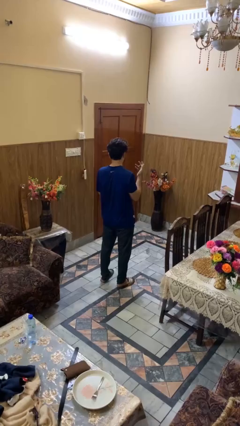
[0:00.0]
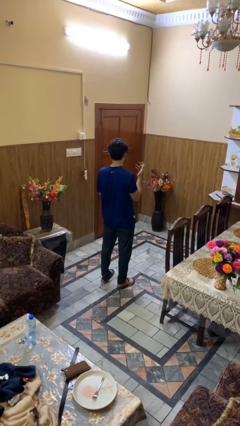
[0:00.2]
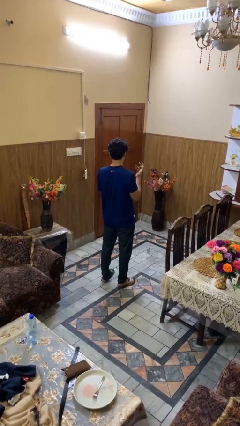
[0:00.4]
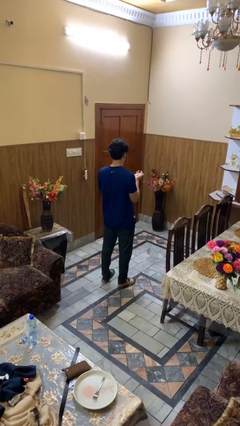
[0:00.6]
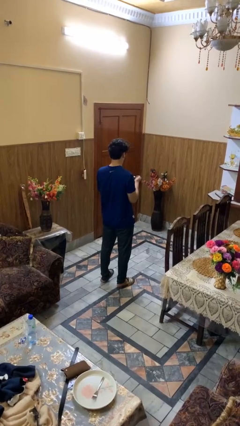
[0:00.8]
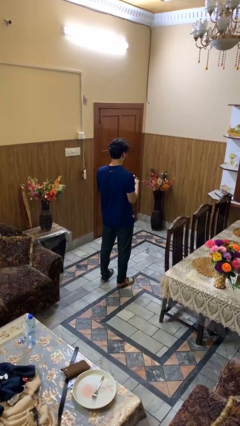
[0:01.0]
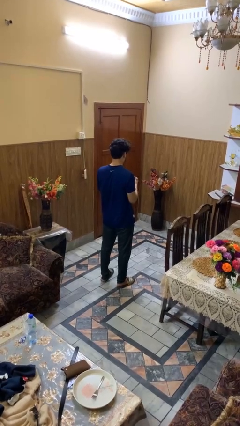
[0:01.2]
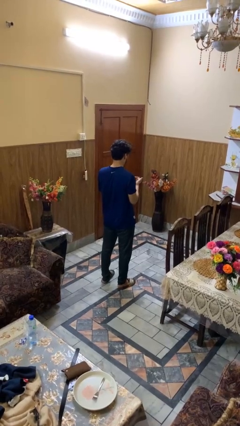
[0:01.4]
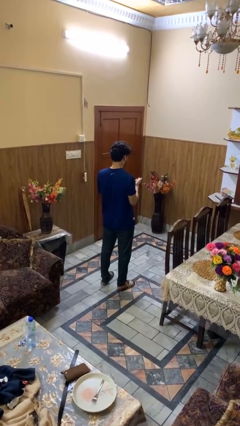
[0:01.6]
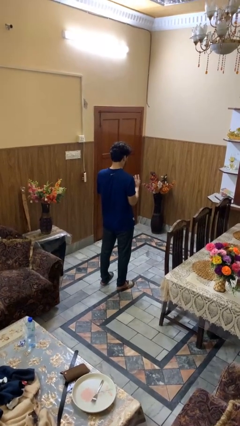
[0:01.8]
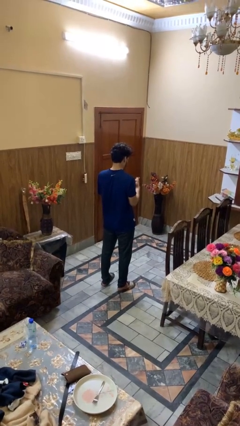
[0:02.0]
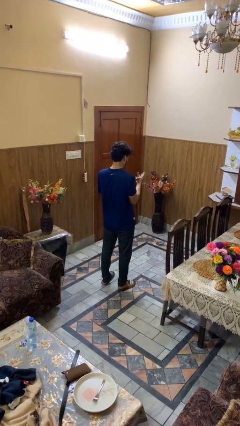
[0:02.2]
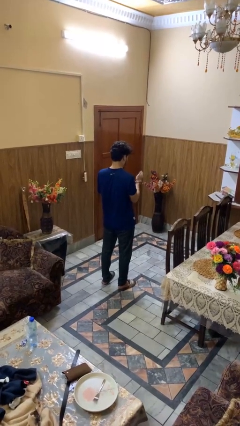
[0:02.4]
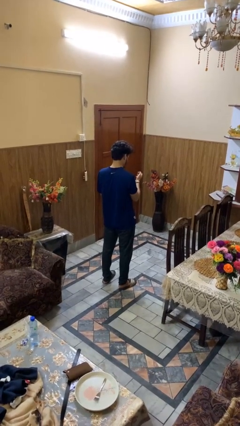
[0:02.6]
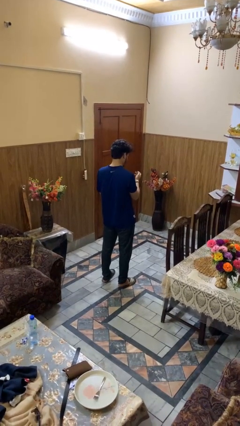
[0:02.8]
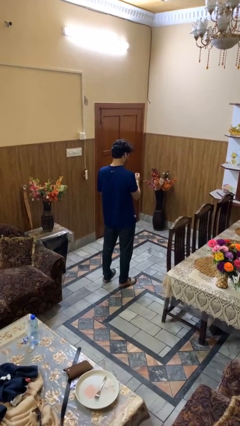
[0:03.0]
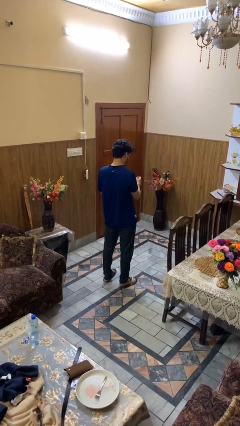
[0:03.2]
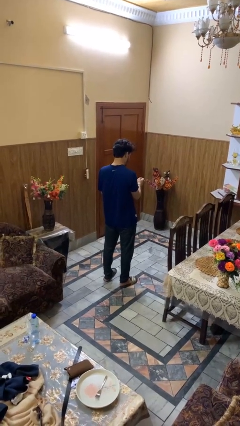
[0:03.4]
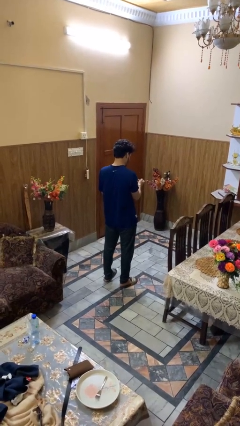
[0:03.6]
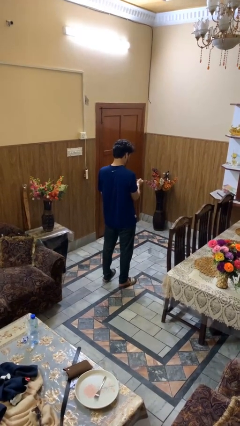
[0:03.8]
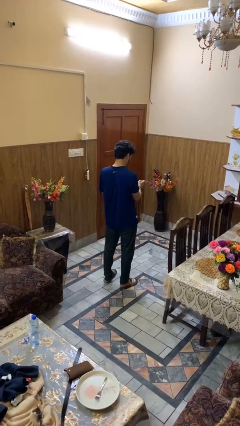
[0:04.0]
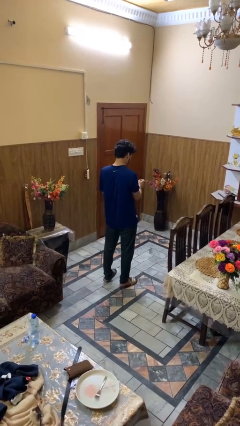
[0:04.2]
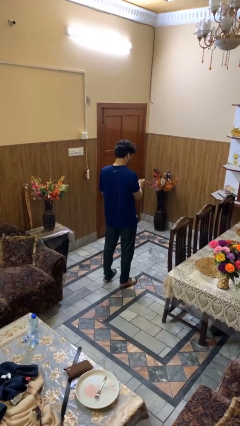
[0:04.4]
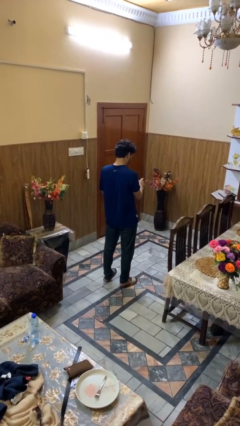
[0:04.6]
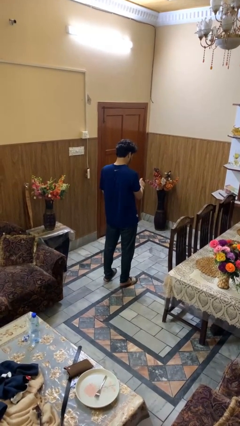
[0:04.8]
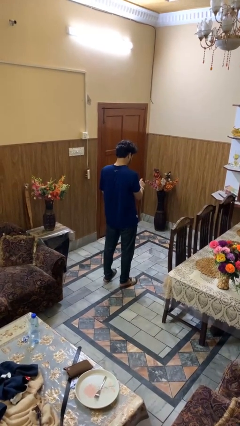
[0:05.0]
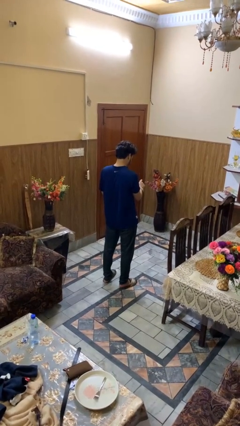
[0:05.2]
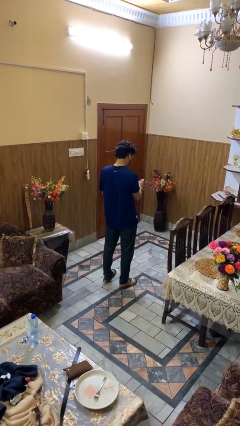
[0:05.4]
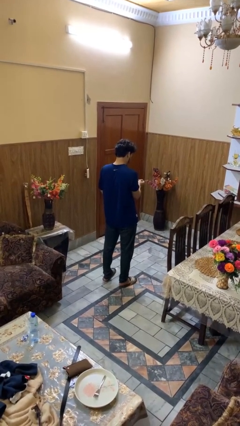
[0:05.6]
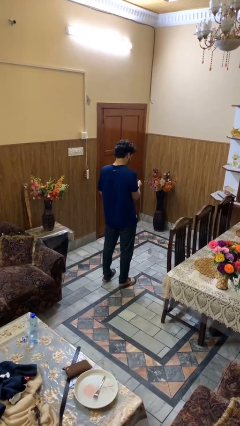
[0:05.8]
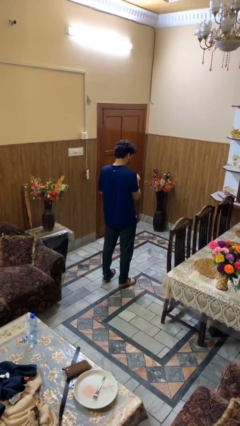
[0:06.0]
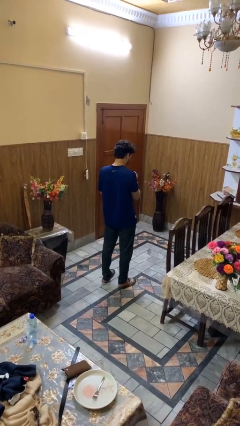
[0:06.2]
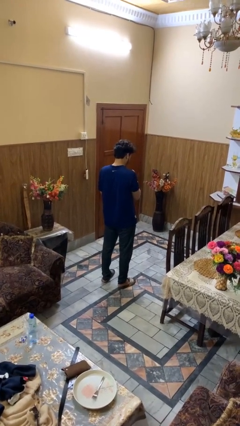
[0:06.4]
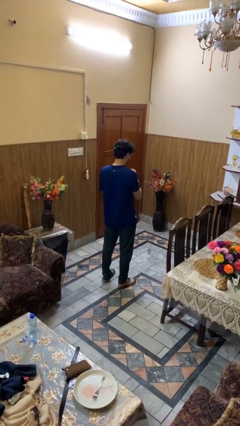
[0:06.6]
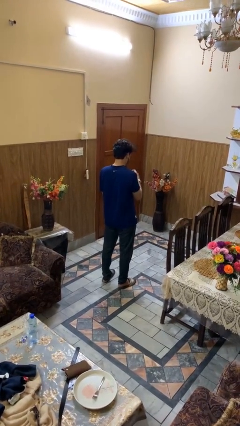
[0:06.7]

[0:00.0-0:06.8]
person puts on wristwatch

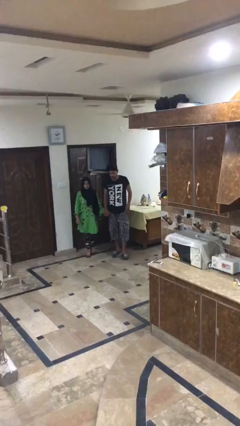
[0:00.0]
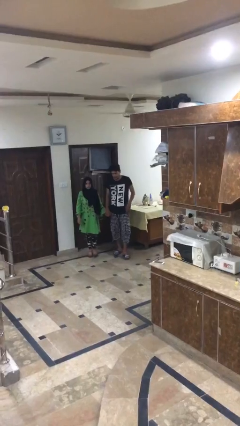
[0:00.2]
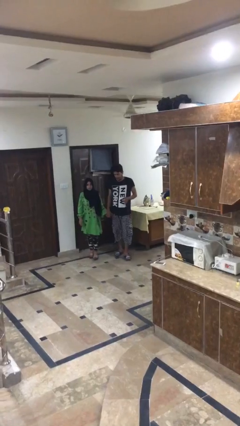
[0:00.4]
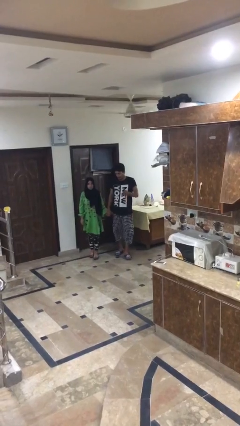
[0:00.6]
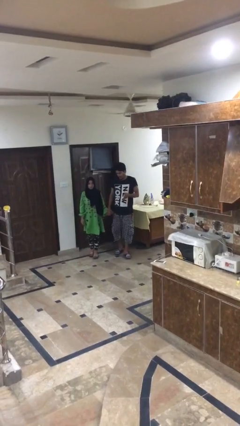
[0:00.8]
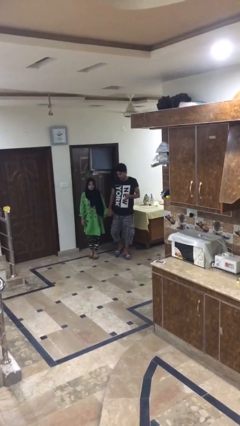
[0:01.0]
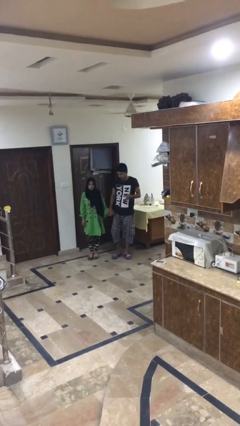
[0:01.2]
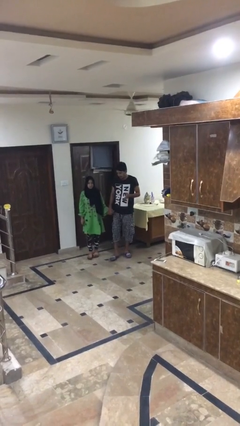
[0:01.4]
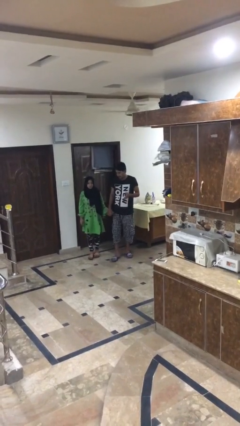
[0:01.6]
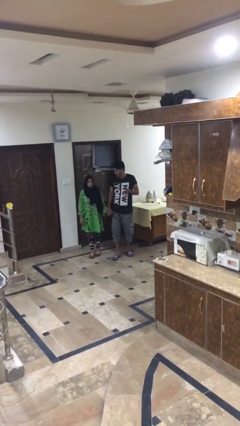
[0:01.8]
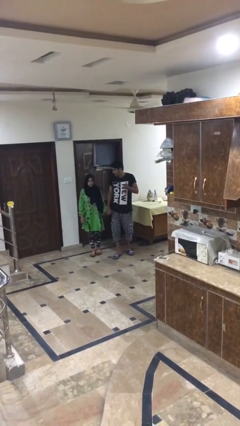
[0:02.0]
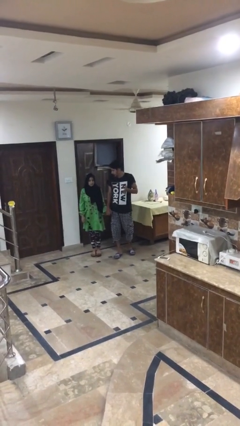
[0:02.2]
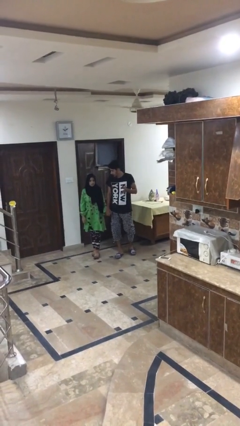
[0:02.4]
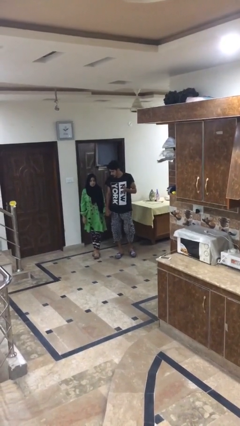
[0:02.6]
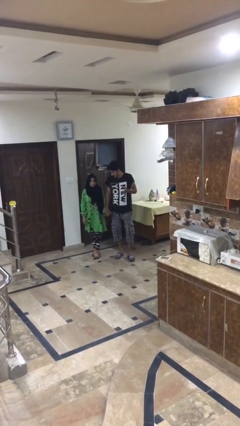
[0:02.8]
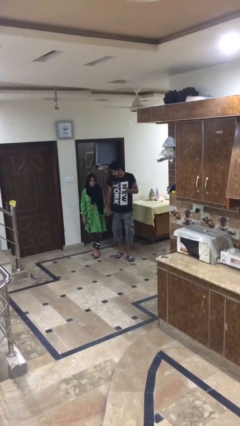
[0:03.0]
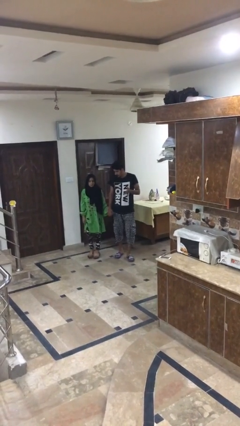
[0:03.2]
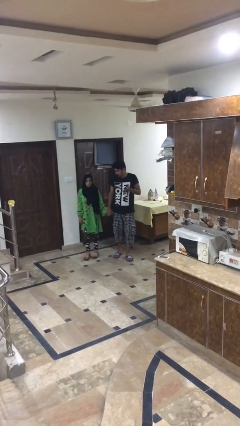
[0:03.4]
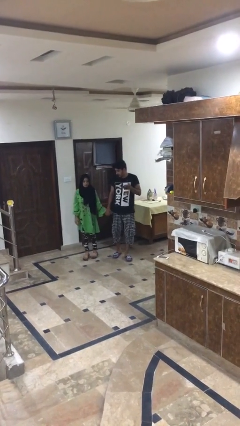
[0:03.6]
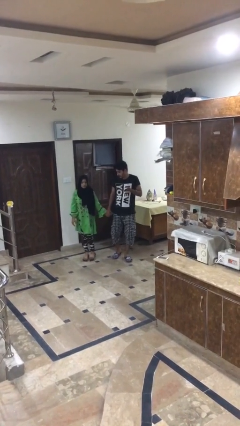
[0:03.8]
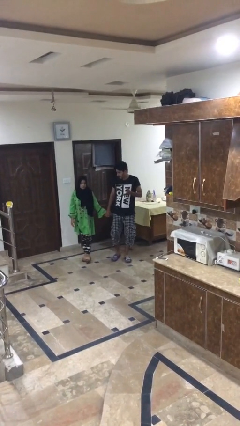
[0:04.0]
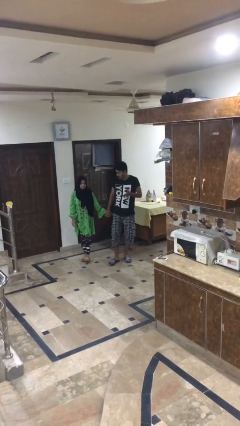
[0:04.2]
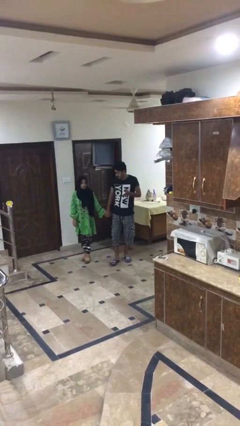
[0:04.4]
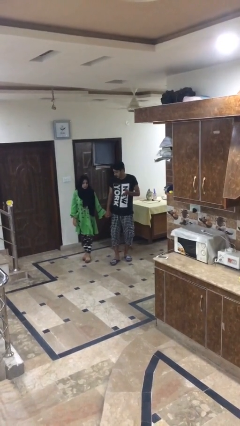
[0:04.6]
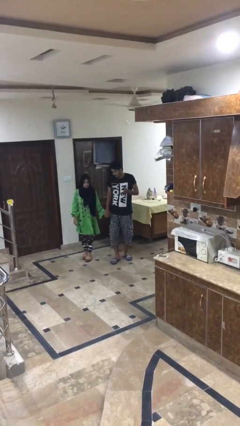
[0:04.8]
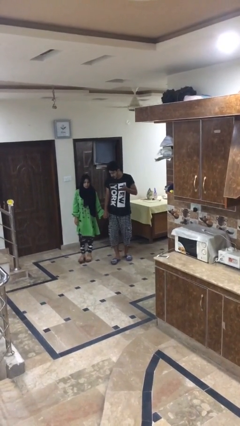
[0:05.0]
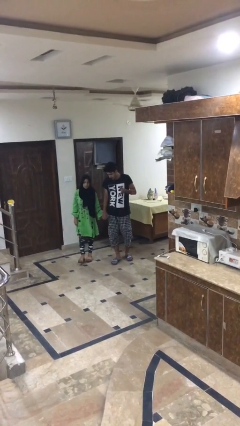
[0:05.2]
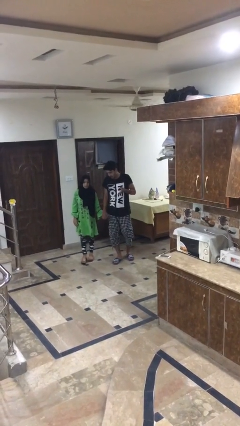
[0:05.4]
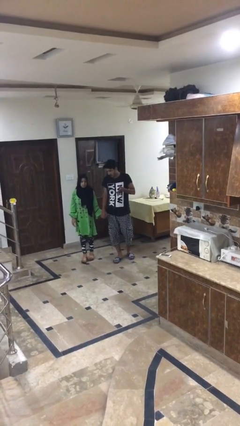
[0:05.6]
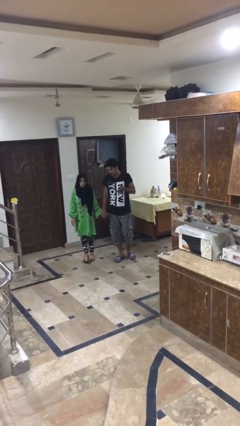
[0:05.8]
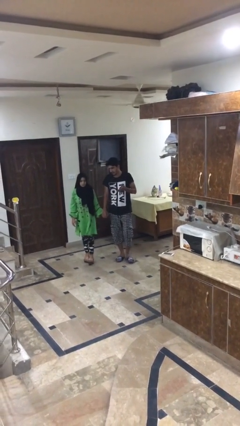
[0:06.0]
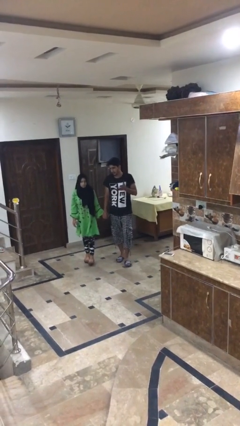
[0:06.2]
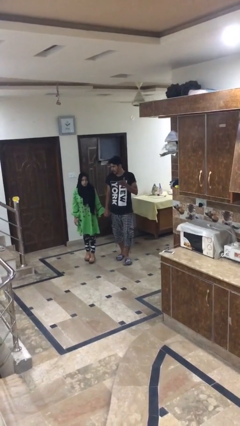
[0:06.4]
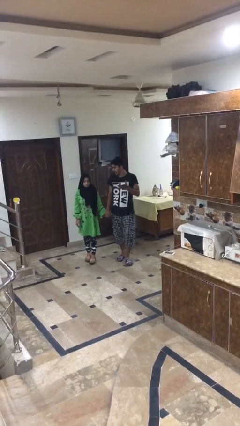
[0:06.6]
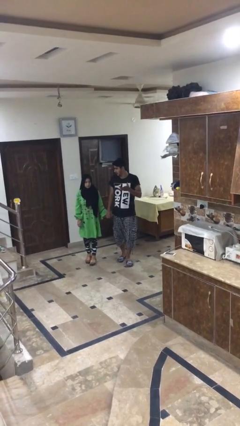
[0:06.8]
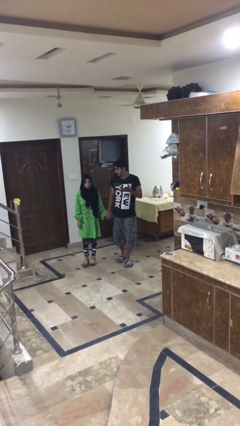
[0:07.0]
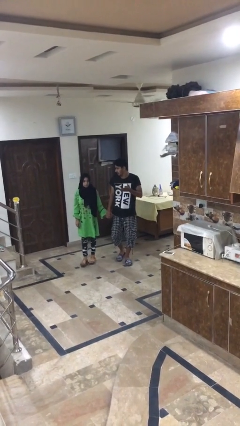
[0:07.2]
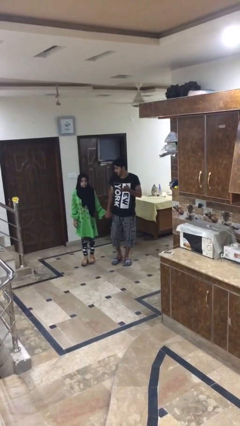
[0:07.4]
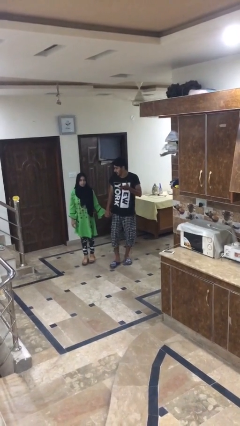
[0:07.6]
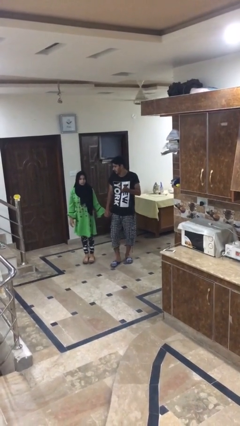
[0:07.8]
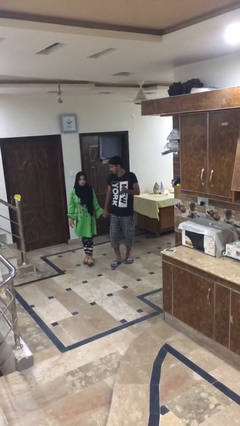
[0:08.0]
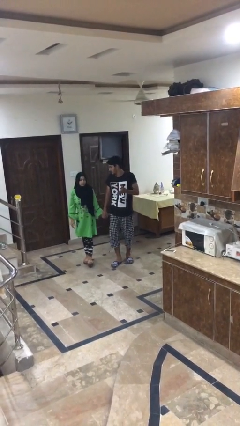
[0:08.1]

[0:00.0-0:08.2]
person holds hand

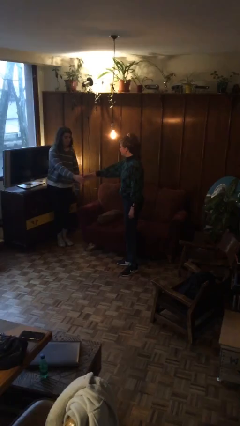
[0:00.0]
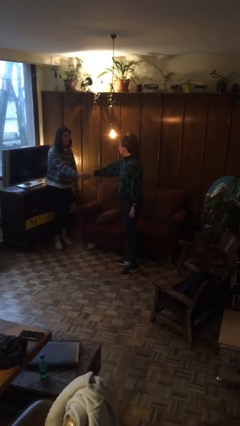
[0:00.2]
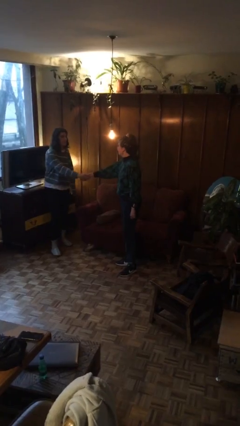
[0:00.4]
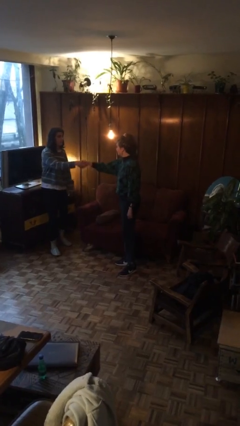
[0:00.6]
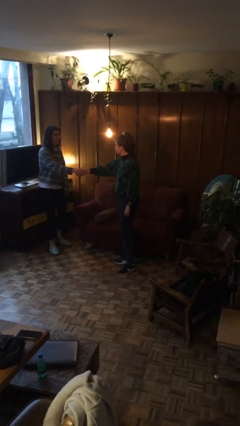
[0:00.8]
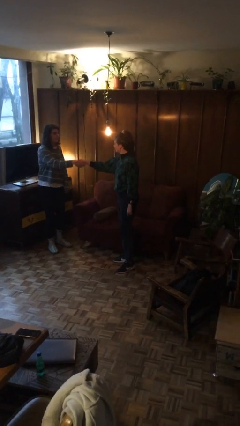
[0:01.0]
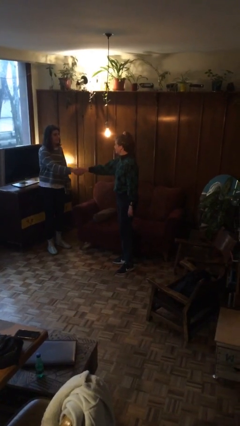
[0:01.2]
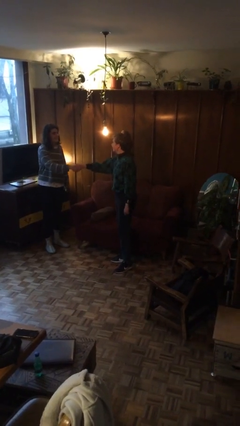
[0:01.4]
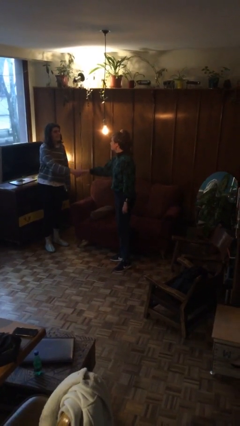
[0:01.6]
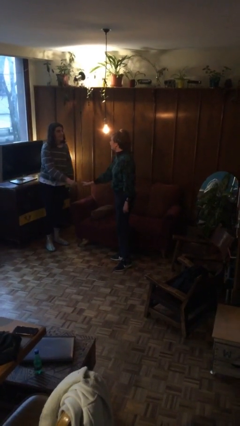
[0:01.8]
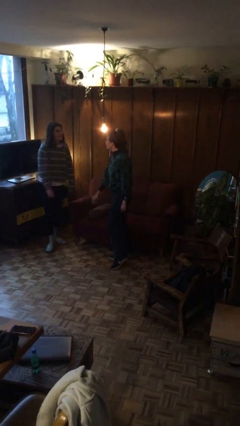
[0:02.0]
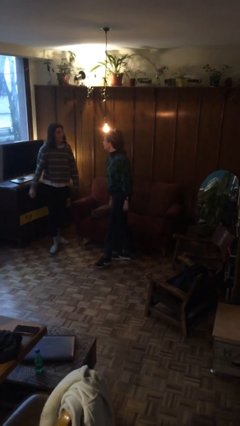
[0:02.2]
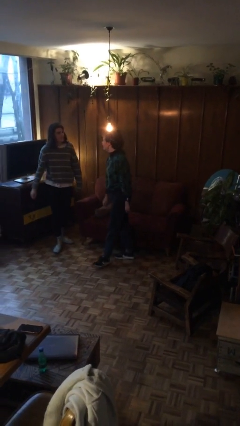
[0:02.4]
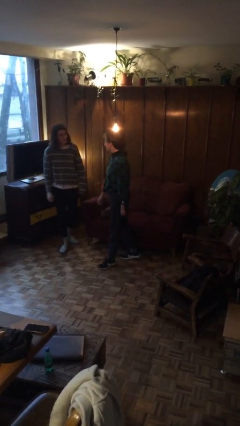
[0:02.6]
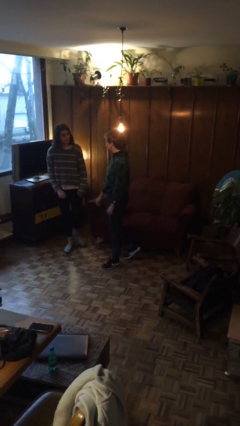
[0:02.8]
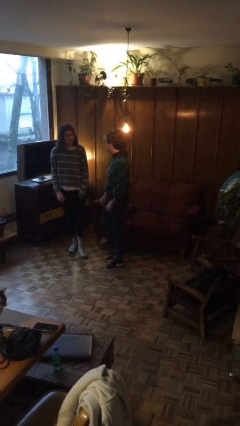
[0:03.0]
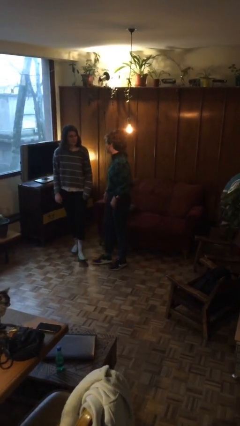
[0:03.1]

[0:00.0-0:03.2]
person shakes hand
